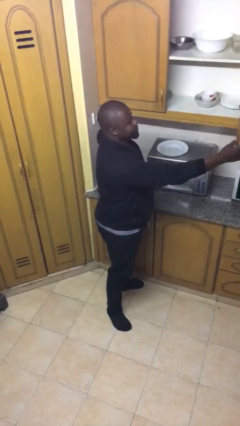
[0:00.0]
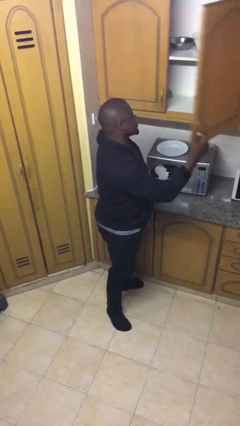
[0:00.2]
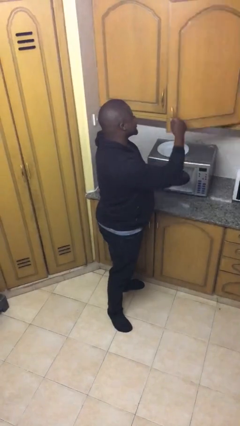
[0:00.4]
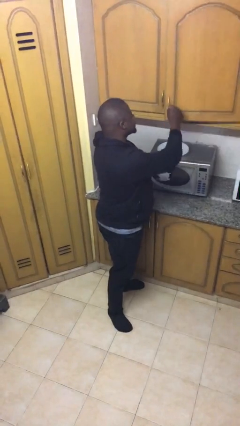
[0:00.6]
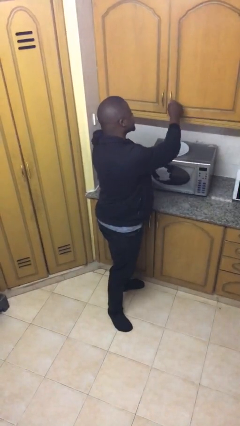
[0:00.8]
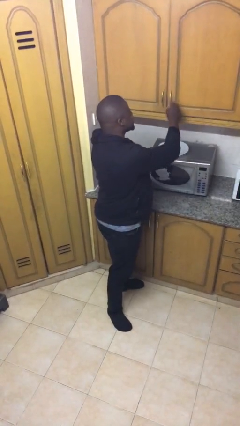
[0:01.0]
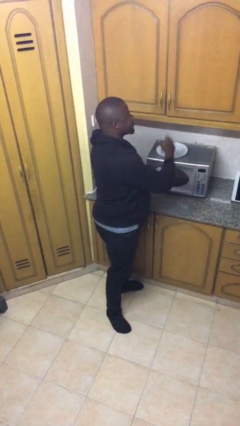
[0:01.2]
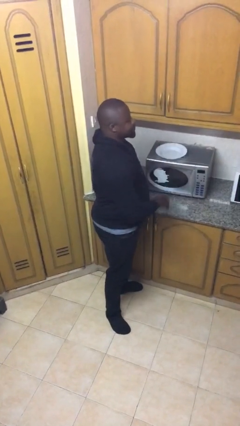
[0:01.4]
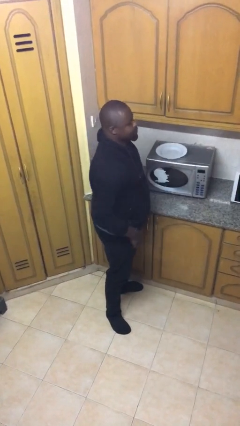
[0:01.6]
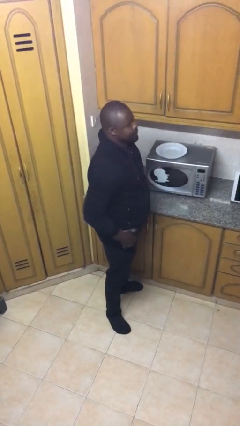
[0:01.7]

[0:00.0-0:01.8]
person closes cabinet

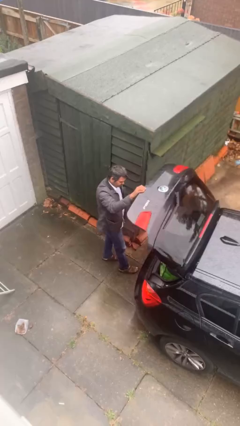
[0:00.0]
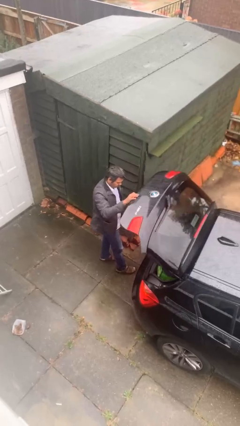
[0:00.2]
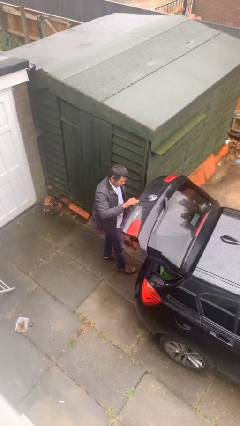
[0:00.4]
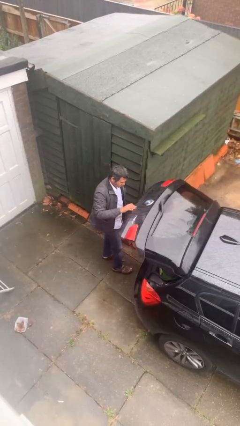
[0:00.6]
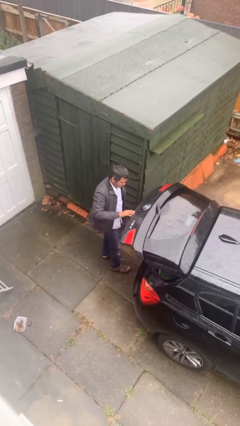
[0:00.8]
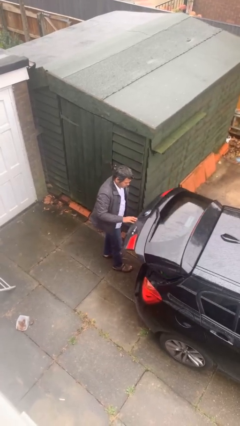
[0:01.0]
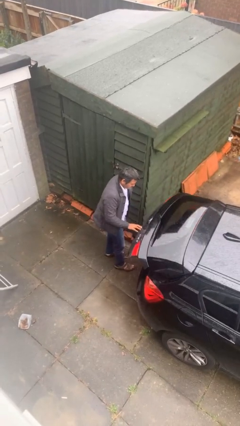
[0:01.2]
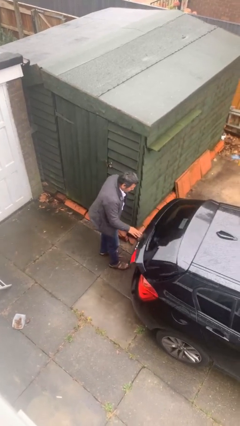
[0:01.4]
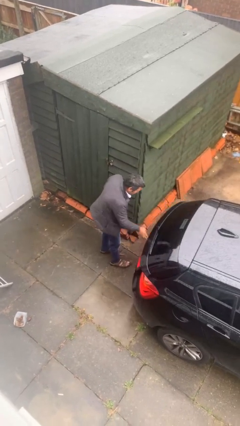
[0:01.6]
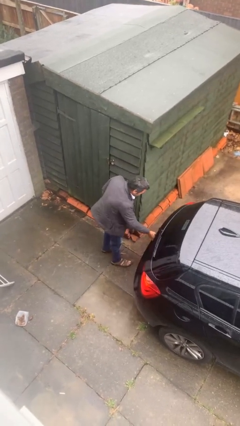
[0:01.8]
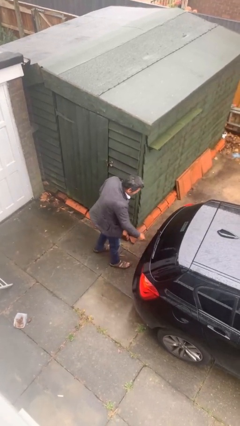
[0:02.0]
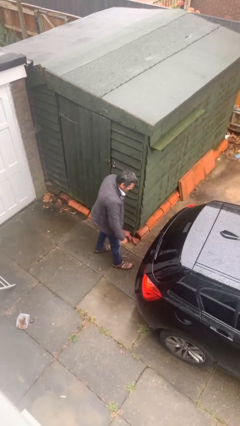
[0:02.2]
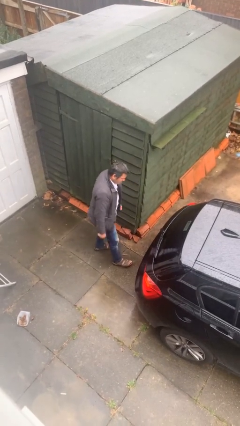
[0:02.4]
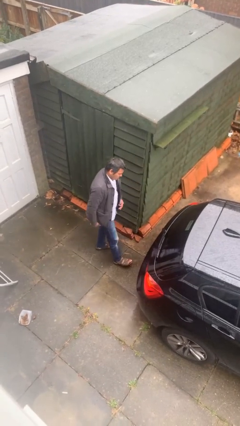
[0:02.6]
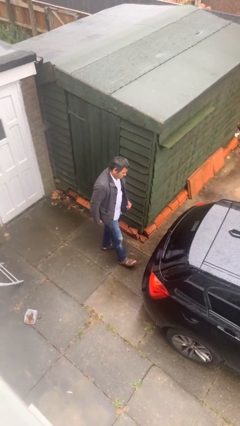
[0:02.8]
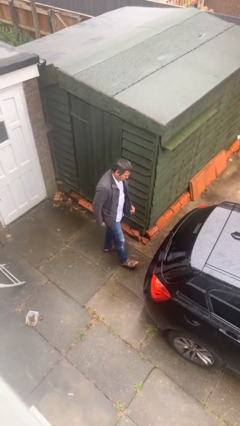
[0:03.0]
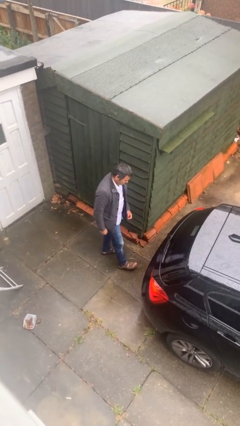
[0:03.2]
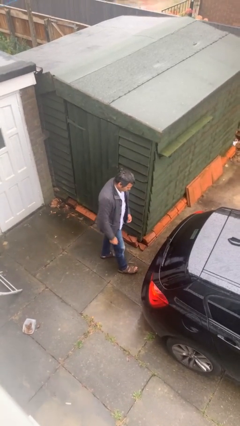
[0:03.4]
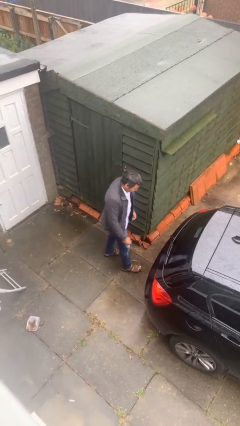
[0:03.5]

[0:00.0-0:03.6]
person closes car trunk

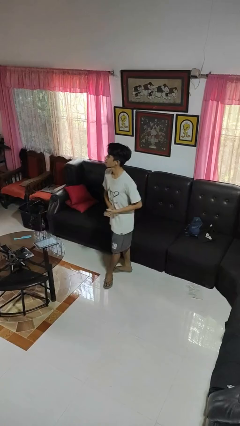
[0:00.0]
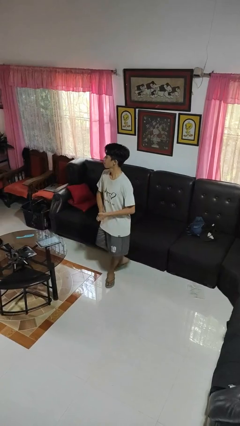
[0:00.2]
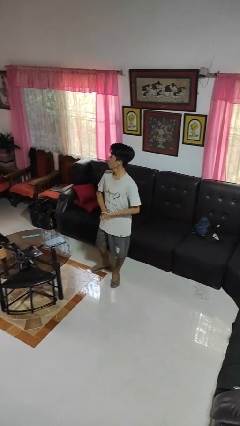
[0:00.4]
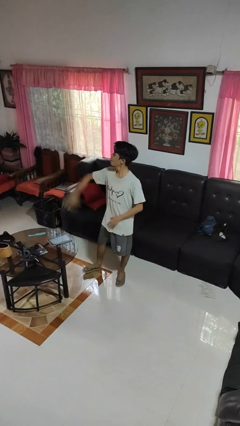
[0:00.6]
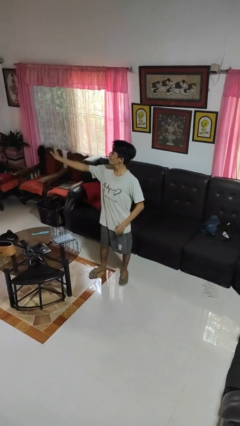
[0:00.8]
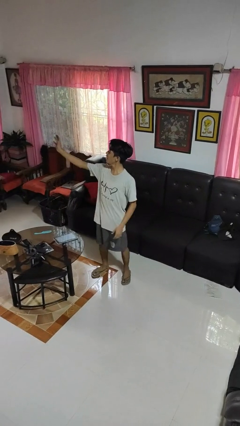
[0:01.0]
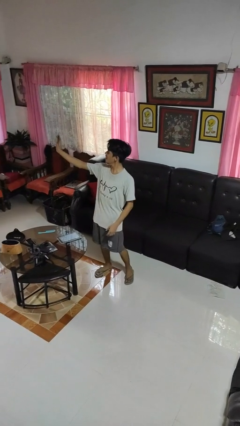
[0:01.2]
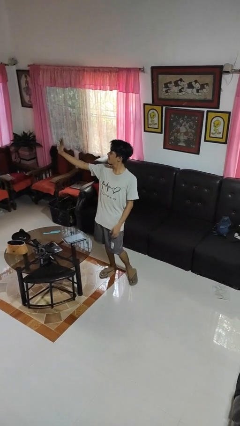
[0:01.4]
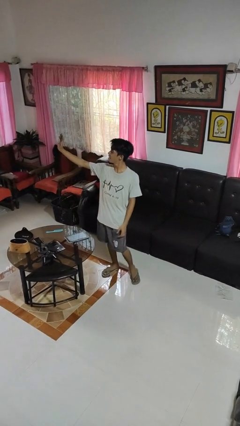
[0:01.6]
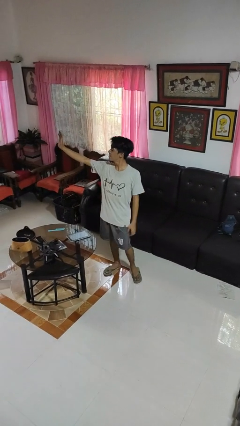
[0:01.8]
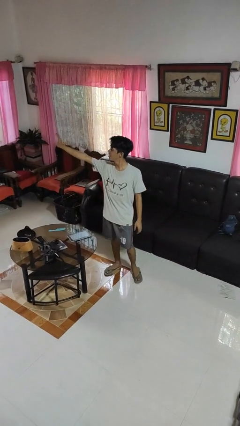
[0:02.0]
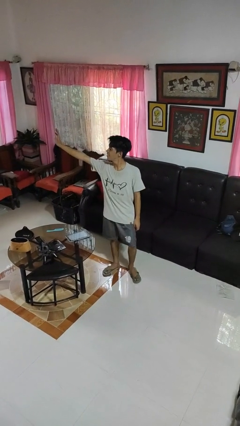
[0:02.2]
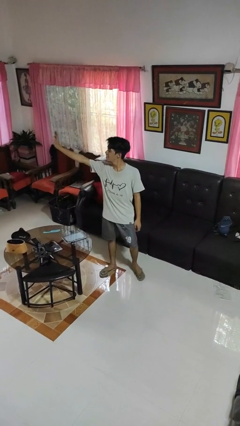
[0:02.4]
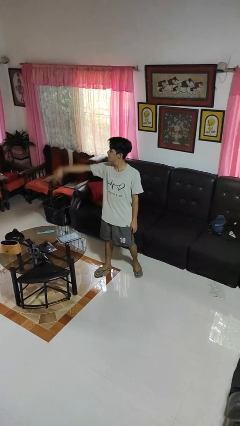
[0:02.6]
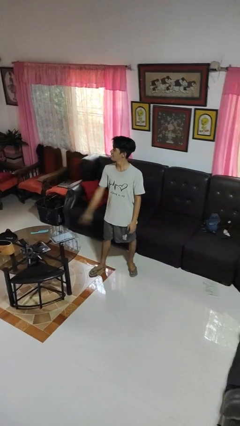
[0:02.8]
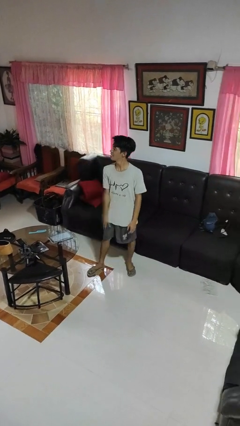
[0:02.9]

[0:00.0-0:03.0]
person waves at person

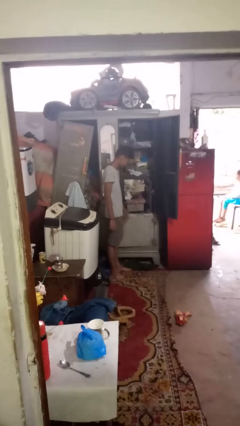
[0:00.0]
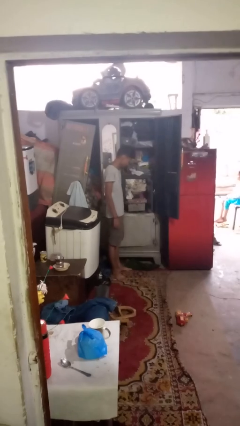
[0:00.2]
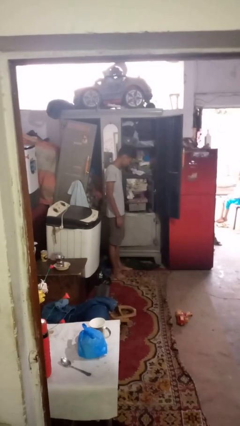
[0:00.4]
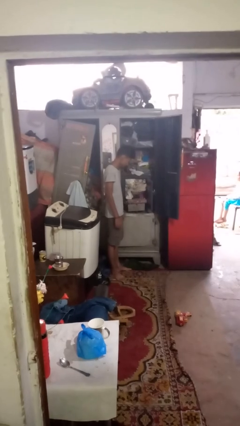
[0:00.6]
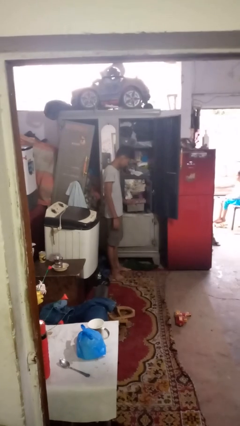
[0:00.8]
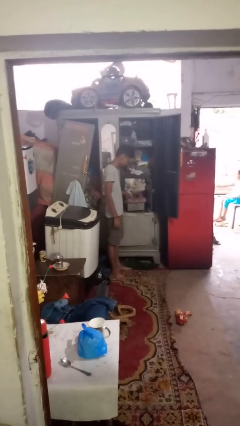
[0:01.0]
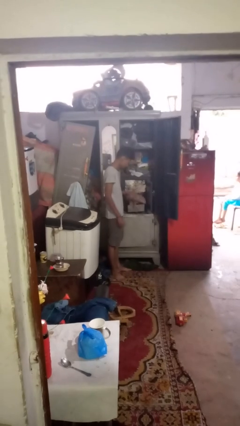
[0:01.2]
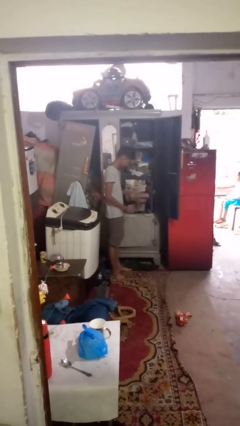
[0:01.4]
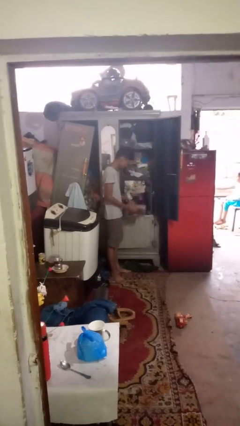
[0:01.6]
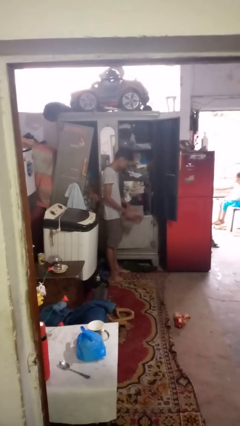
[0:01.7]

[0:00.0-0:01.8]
person takes clothes from dresser

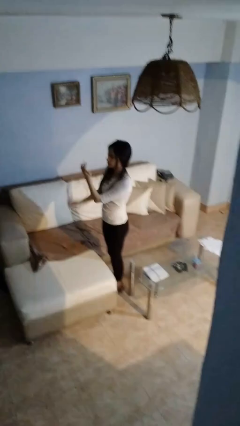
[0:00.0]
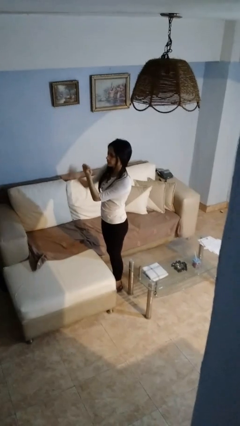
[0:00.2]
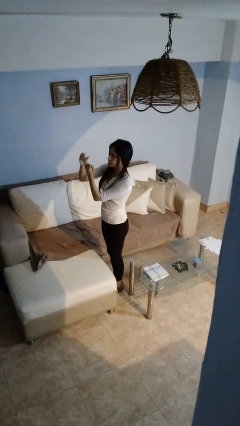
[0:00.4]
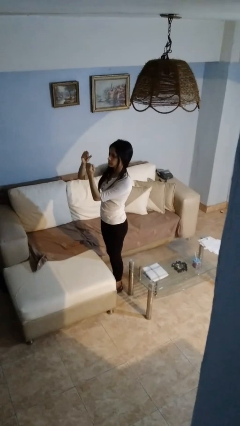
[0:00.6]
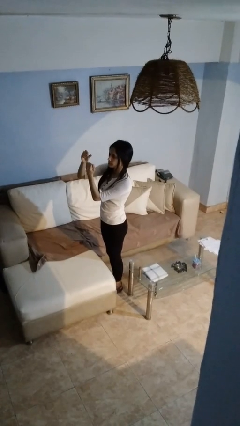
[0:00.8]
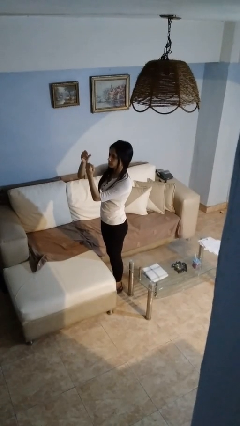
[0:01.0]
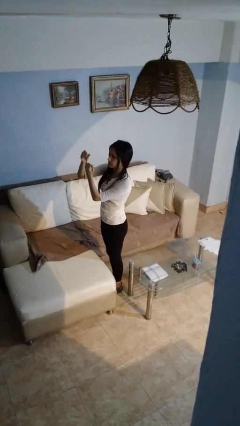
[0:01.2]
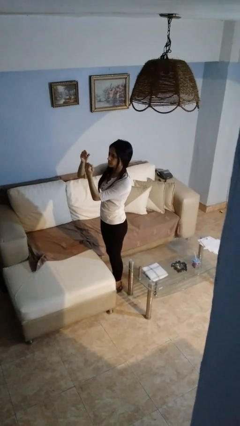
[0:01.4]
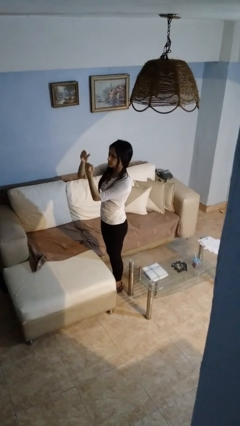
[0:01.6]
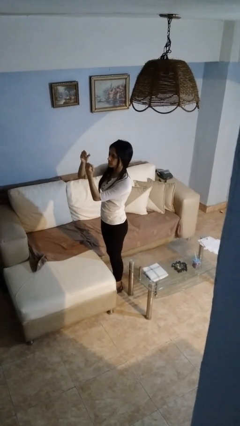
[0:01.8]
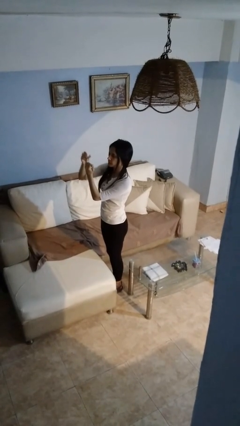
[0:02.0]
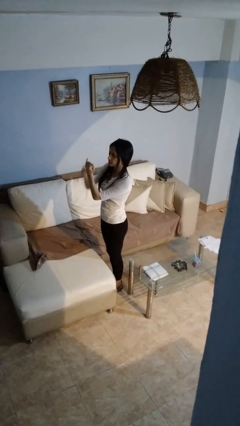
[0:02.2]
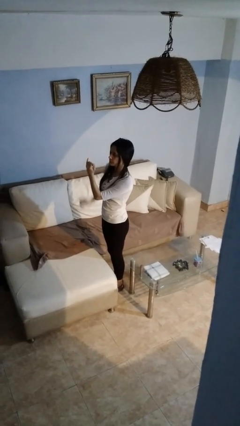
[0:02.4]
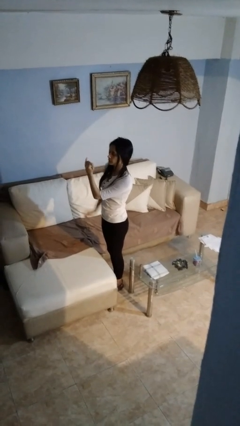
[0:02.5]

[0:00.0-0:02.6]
person clips fingernails

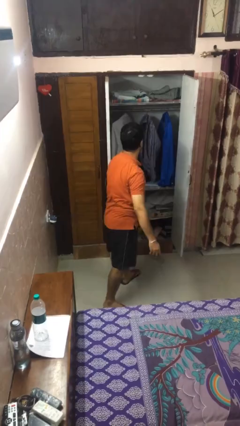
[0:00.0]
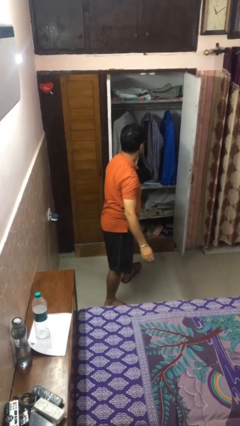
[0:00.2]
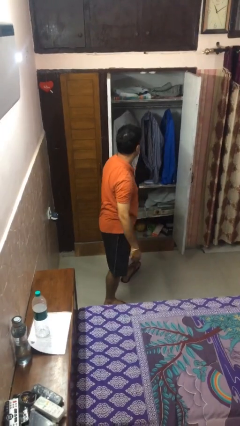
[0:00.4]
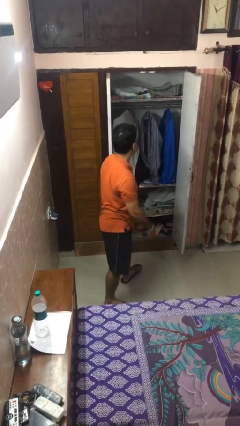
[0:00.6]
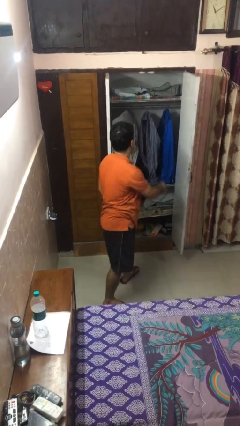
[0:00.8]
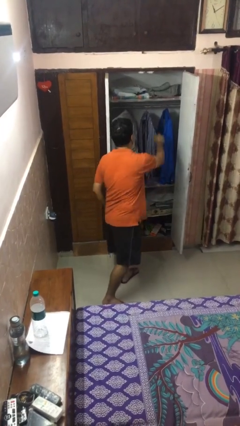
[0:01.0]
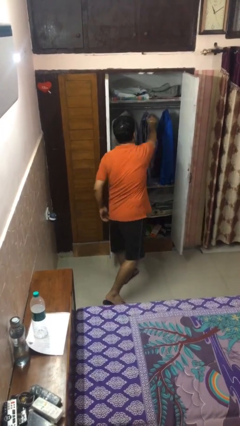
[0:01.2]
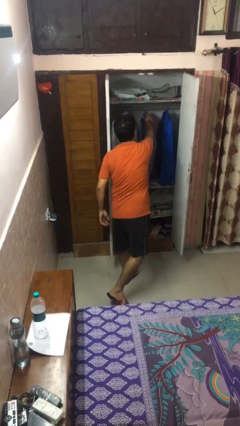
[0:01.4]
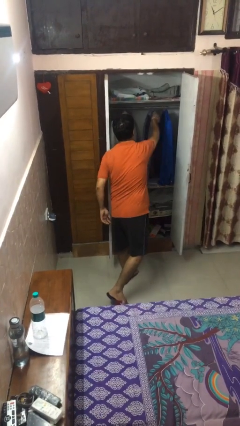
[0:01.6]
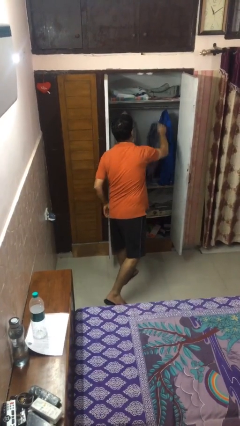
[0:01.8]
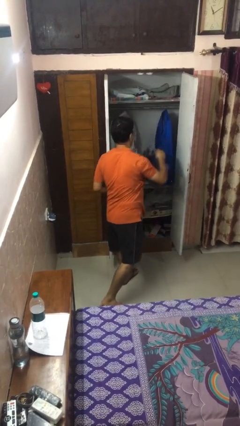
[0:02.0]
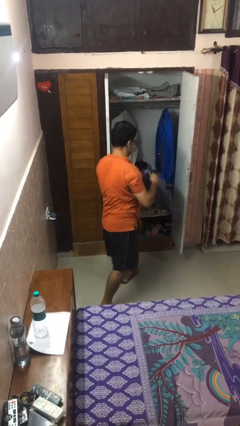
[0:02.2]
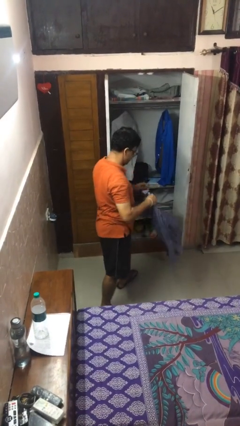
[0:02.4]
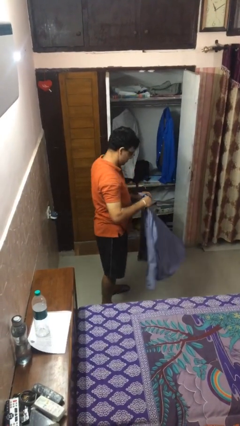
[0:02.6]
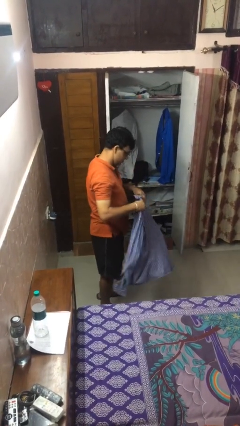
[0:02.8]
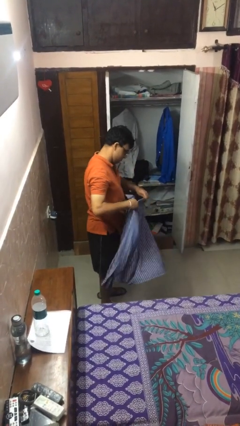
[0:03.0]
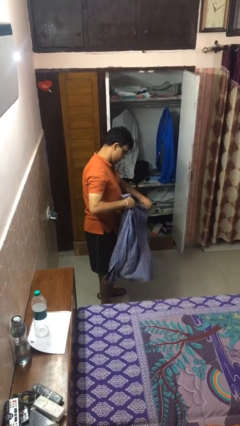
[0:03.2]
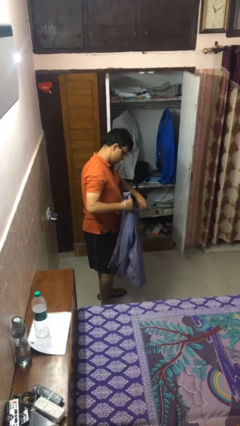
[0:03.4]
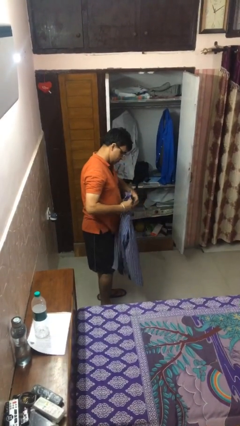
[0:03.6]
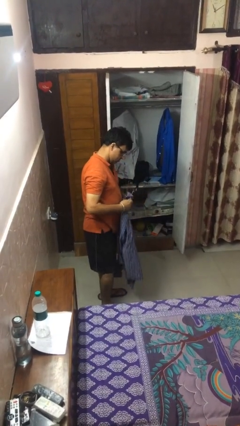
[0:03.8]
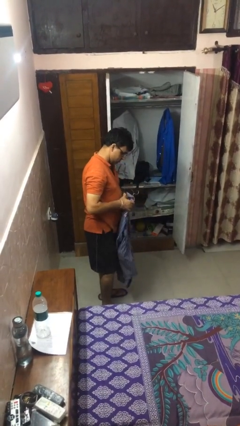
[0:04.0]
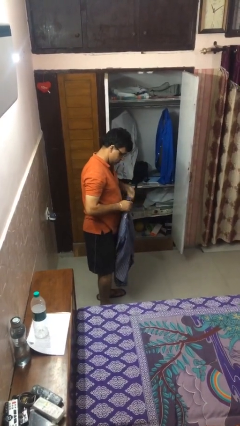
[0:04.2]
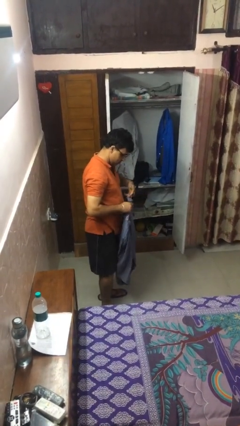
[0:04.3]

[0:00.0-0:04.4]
person takes clothes from closet
